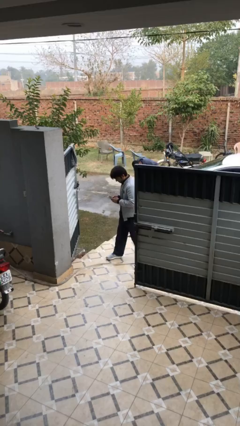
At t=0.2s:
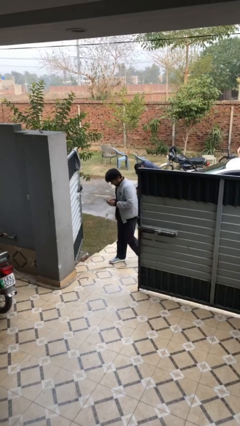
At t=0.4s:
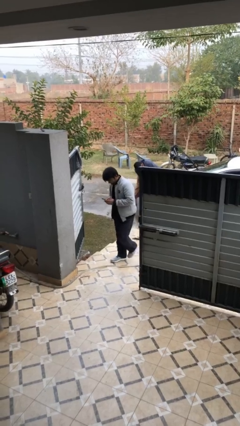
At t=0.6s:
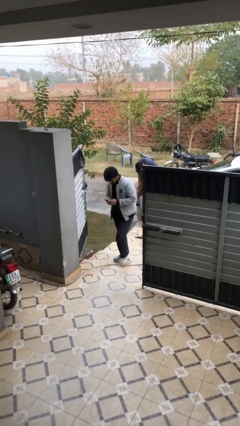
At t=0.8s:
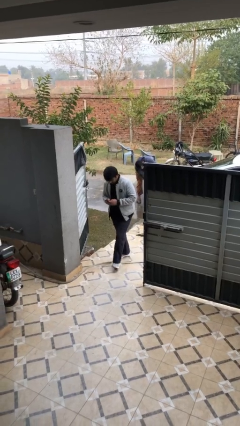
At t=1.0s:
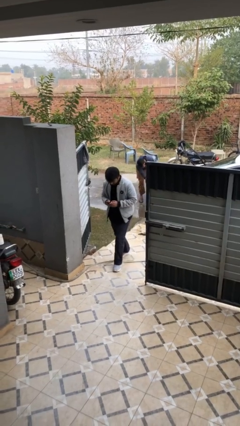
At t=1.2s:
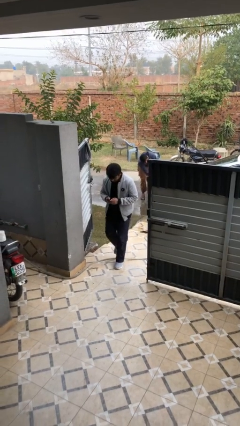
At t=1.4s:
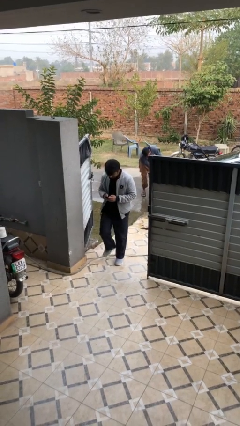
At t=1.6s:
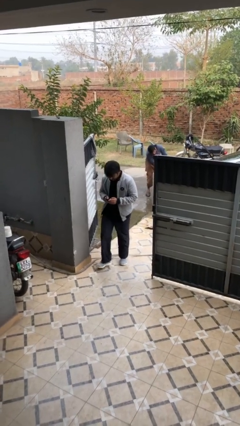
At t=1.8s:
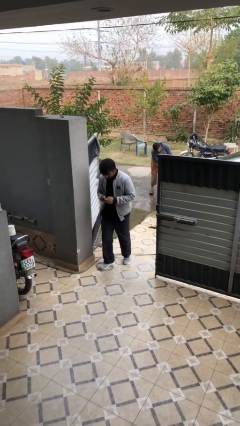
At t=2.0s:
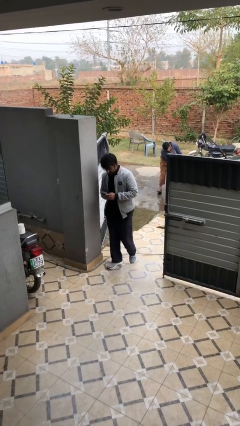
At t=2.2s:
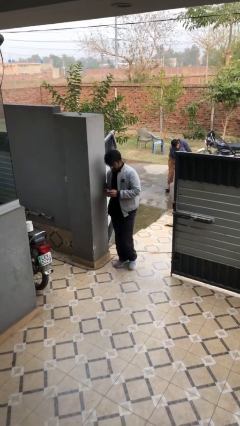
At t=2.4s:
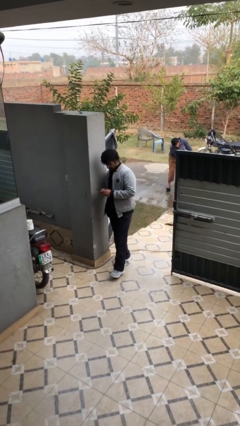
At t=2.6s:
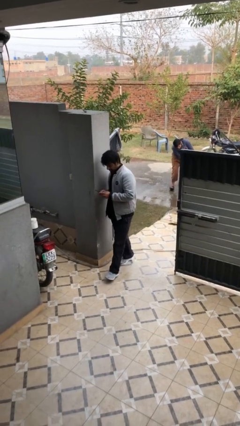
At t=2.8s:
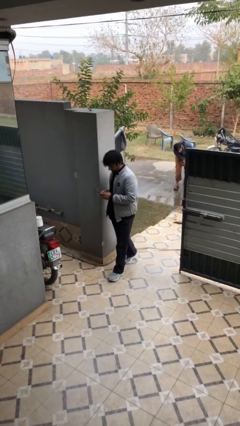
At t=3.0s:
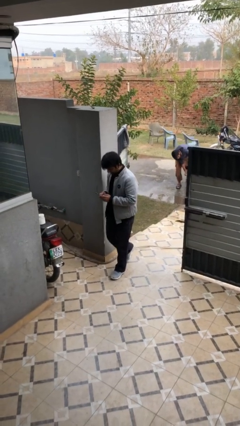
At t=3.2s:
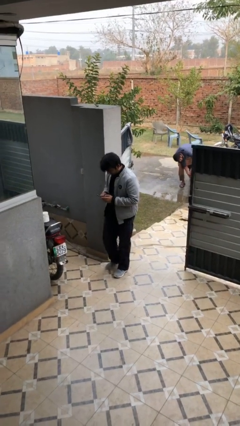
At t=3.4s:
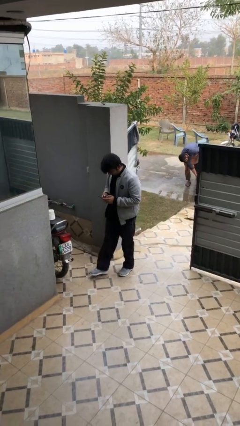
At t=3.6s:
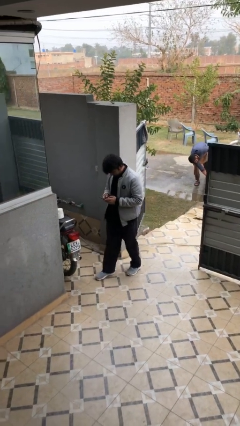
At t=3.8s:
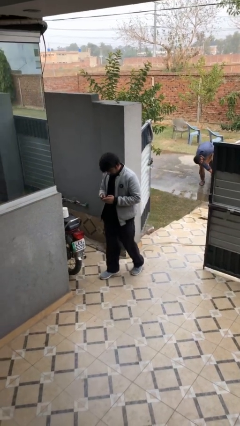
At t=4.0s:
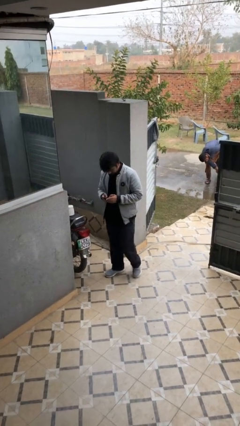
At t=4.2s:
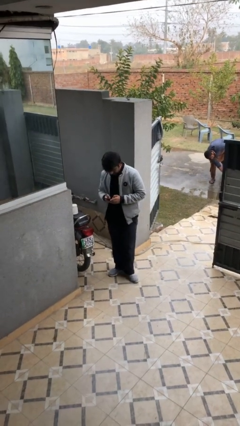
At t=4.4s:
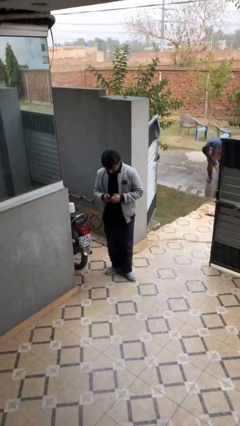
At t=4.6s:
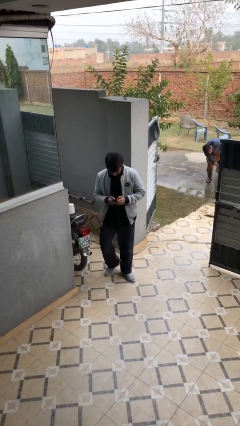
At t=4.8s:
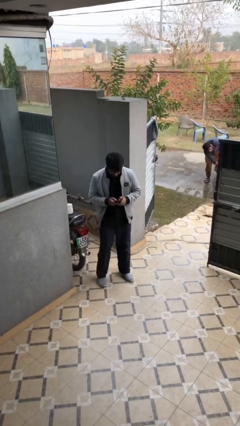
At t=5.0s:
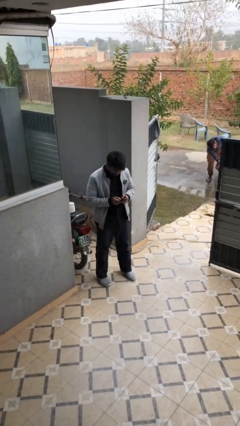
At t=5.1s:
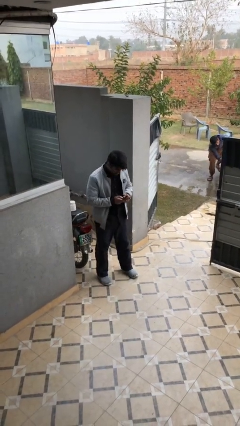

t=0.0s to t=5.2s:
person enters scene through structure

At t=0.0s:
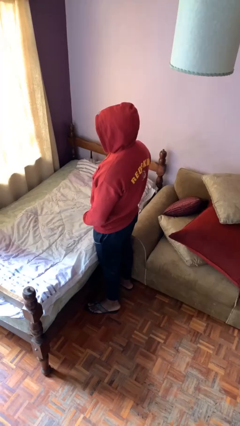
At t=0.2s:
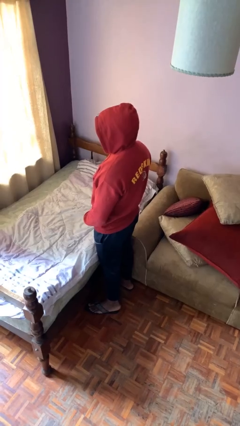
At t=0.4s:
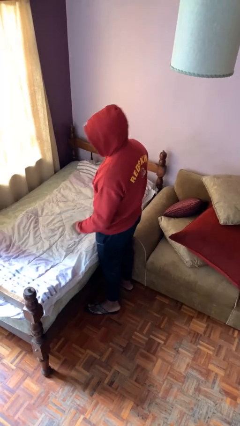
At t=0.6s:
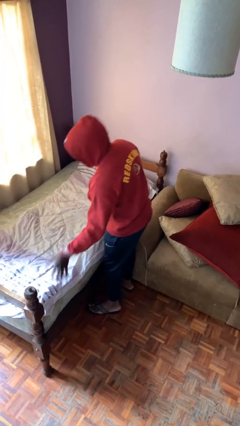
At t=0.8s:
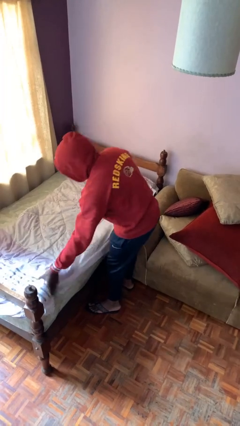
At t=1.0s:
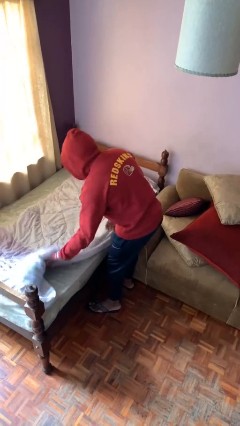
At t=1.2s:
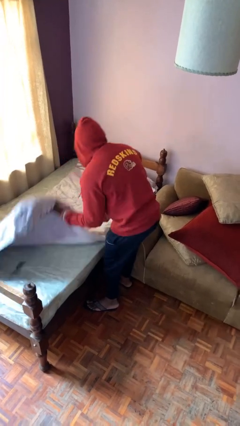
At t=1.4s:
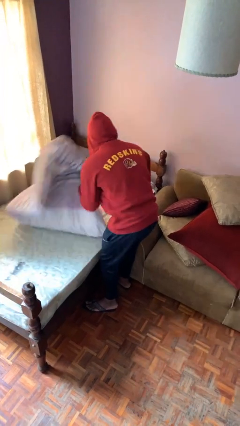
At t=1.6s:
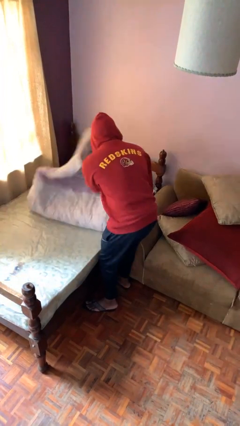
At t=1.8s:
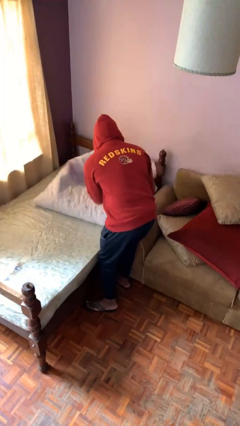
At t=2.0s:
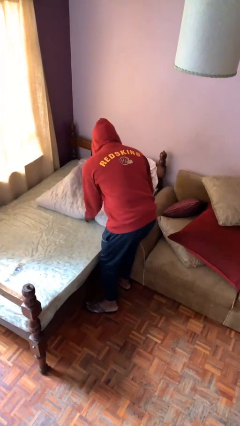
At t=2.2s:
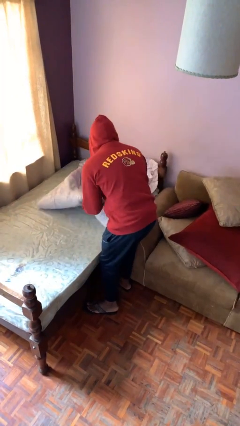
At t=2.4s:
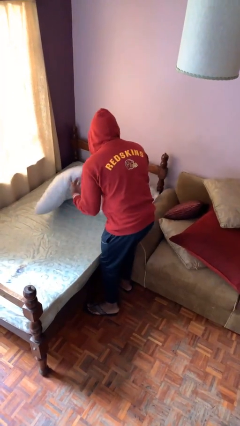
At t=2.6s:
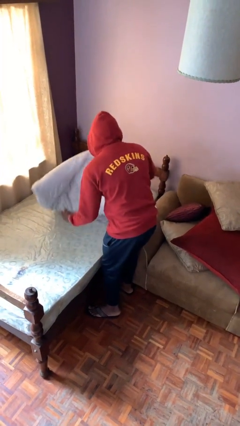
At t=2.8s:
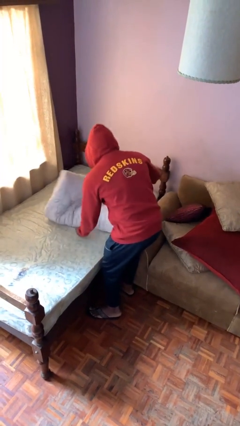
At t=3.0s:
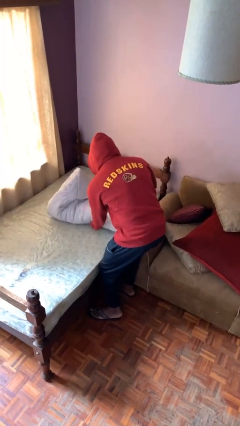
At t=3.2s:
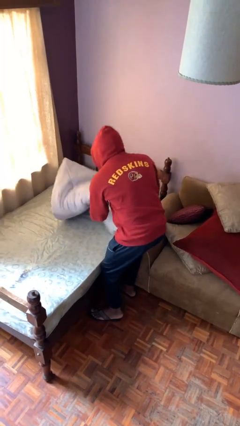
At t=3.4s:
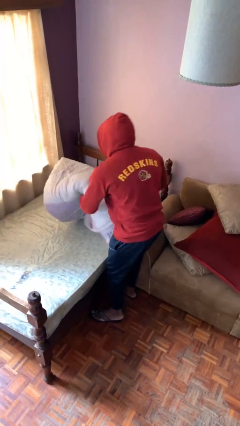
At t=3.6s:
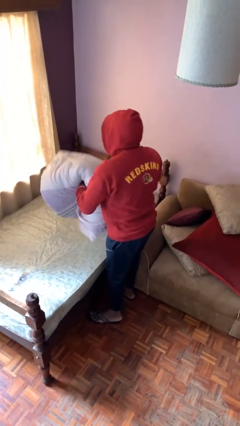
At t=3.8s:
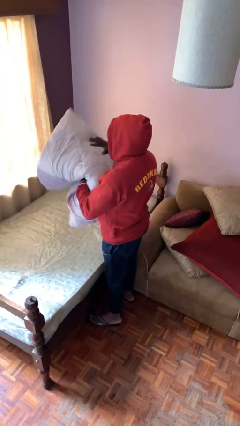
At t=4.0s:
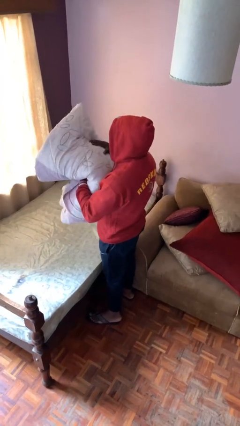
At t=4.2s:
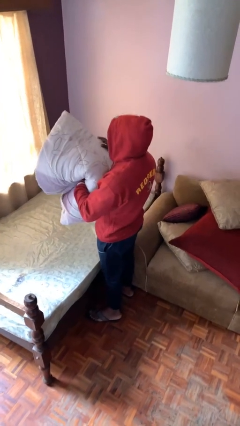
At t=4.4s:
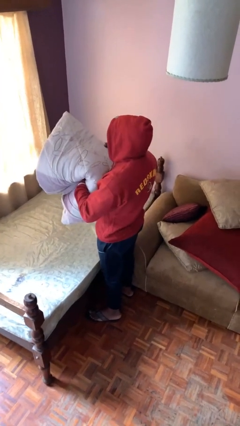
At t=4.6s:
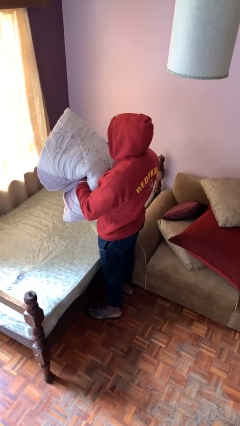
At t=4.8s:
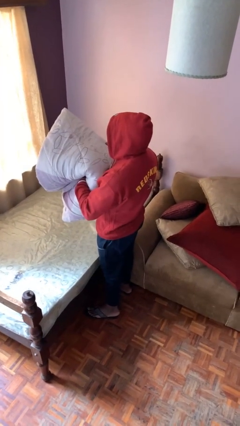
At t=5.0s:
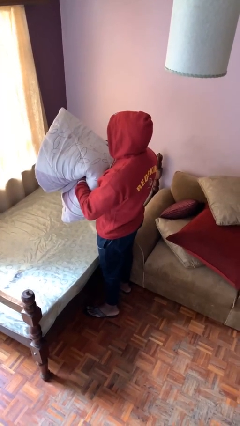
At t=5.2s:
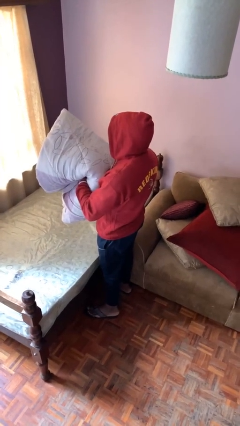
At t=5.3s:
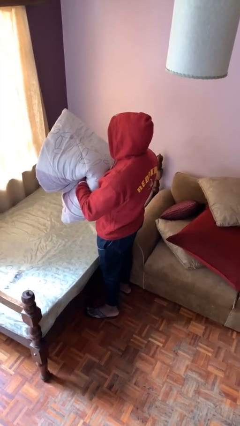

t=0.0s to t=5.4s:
person folds blanket

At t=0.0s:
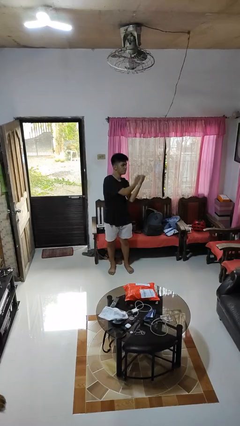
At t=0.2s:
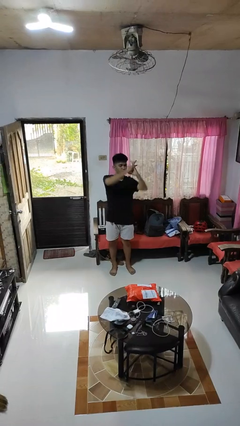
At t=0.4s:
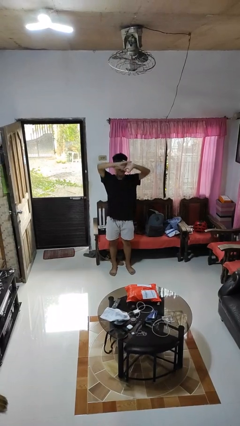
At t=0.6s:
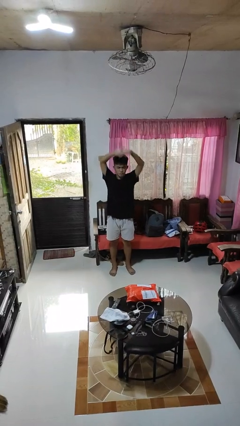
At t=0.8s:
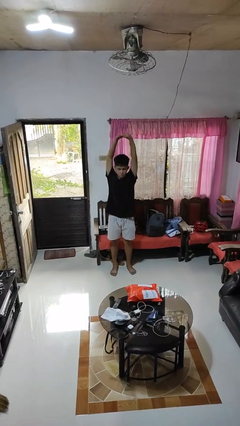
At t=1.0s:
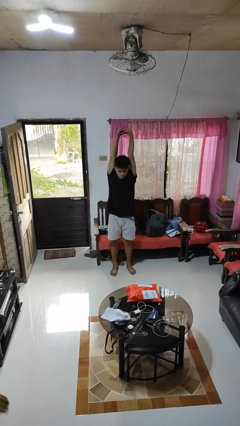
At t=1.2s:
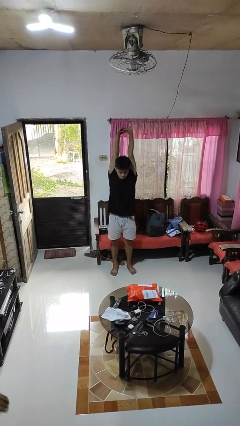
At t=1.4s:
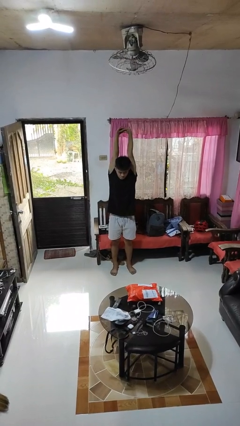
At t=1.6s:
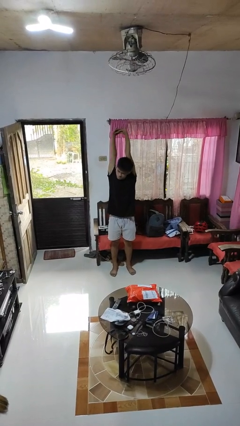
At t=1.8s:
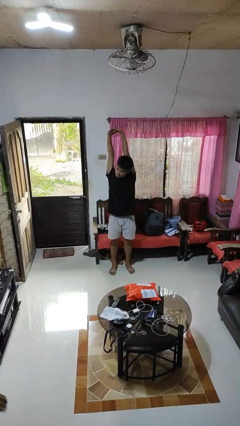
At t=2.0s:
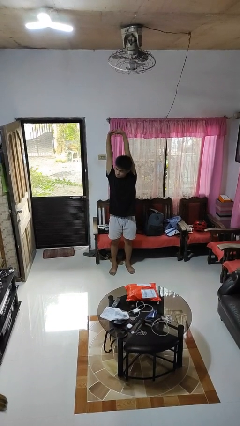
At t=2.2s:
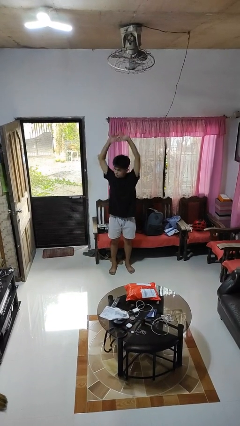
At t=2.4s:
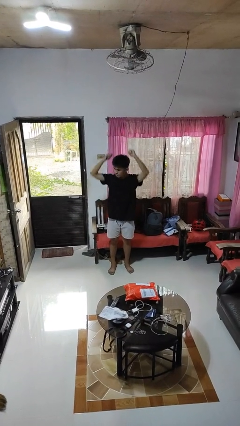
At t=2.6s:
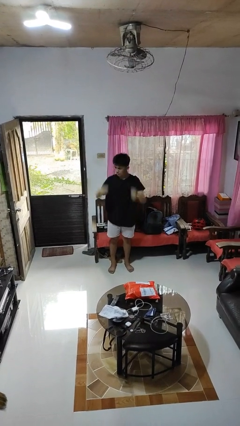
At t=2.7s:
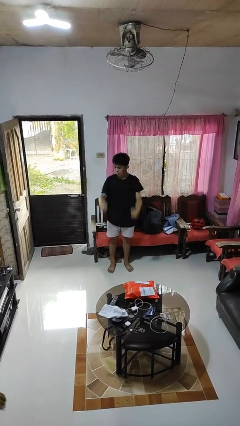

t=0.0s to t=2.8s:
person stretches arms over head

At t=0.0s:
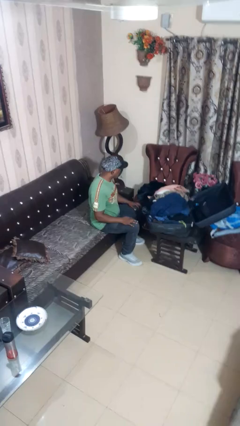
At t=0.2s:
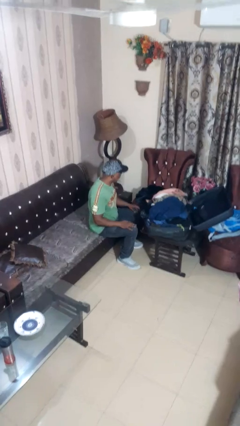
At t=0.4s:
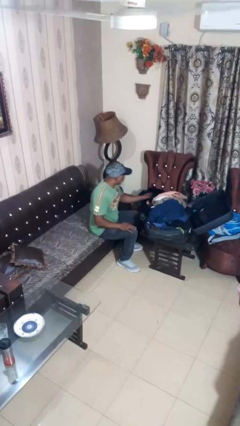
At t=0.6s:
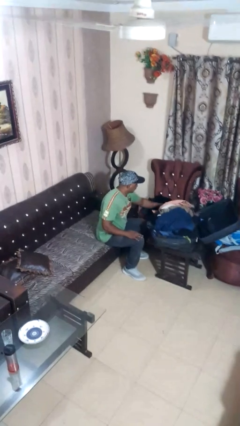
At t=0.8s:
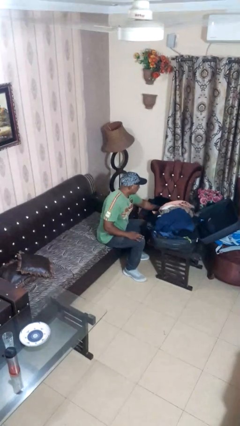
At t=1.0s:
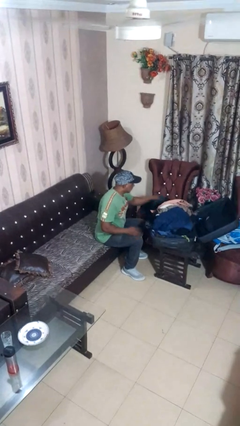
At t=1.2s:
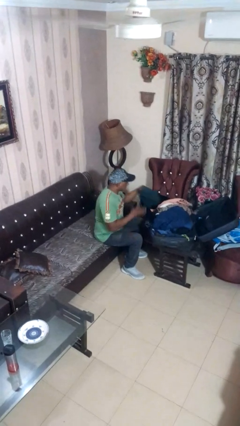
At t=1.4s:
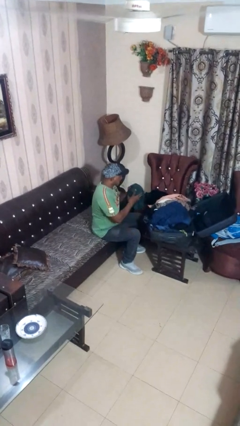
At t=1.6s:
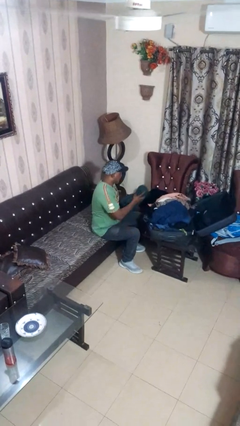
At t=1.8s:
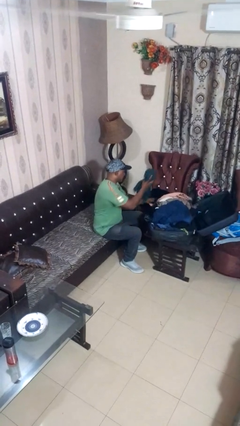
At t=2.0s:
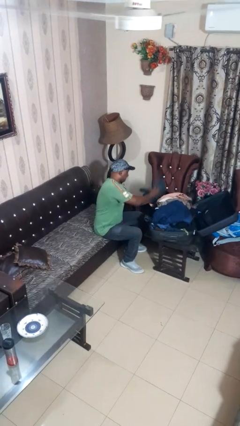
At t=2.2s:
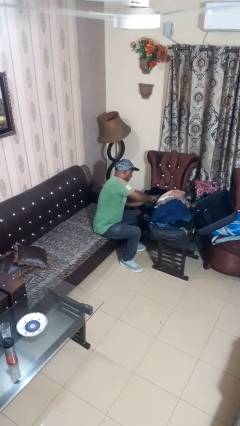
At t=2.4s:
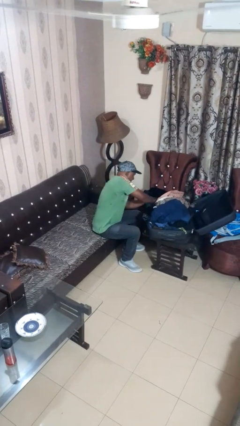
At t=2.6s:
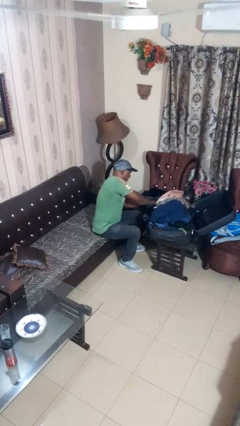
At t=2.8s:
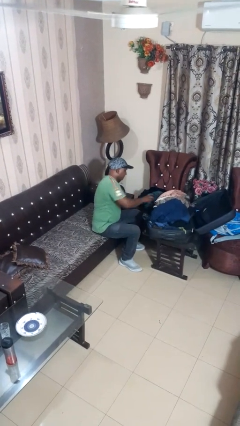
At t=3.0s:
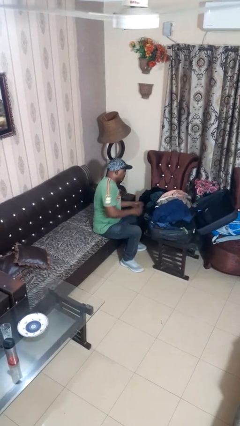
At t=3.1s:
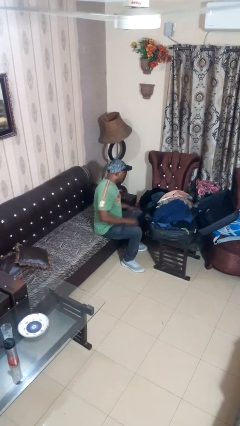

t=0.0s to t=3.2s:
person loads clothes into suitcase

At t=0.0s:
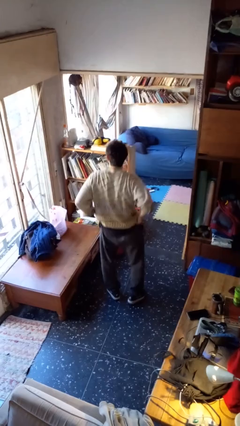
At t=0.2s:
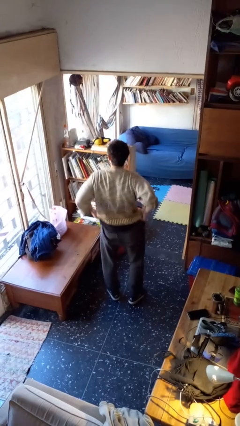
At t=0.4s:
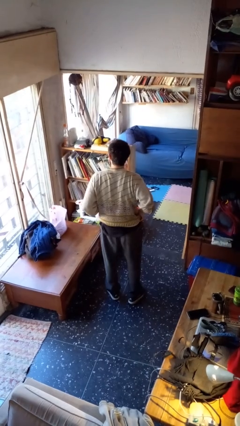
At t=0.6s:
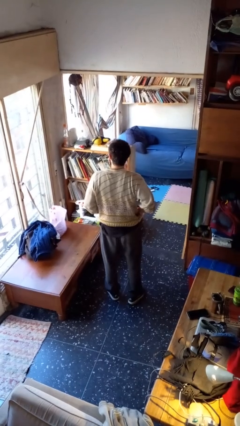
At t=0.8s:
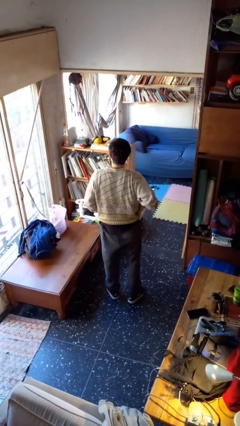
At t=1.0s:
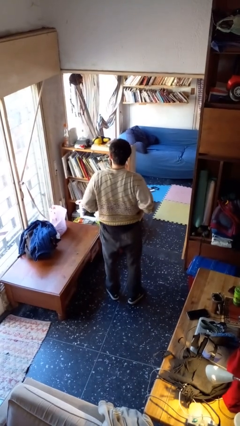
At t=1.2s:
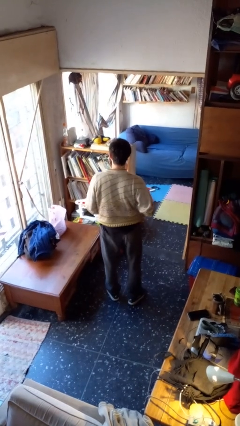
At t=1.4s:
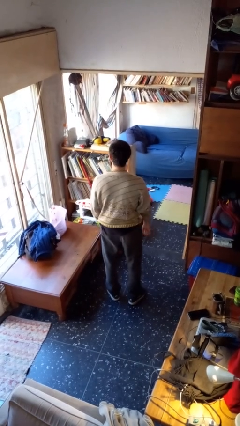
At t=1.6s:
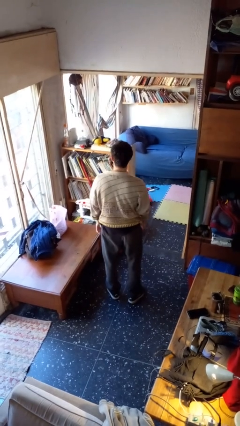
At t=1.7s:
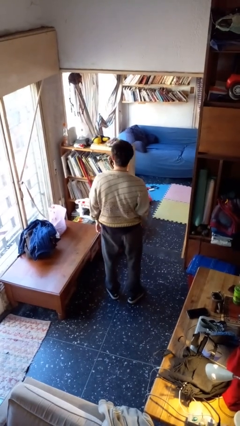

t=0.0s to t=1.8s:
person hikes up pants
